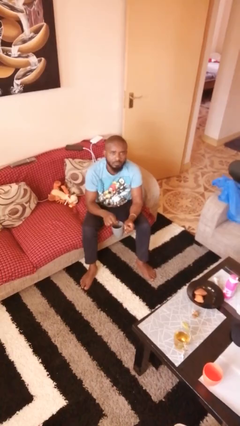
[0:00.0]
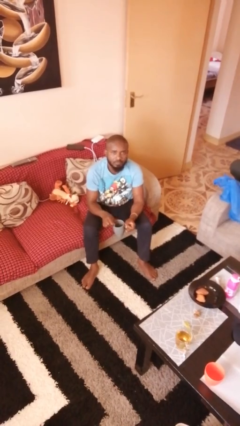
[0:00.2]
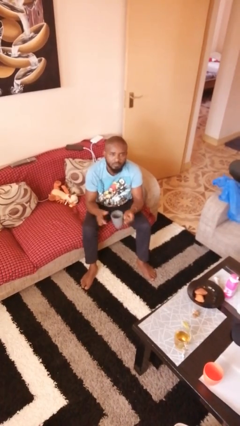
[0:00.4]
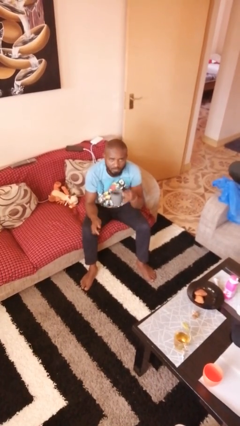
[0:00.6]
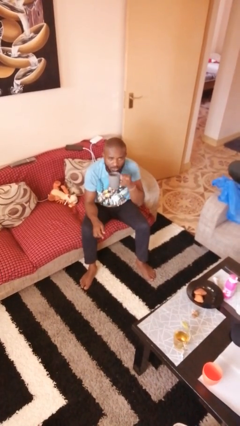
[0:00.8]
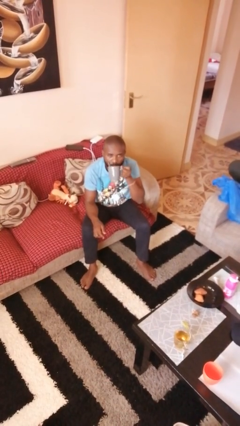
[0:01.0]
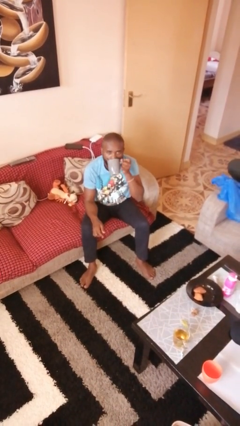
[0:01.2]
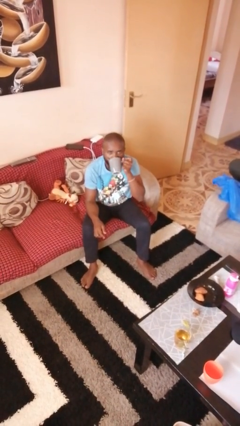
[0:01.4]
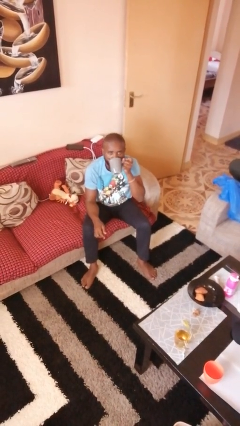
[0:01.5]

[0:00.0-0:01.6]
person drinks from mug

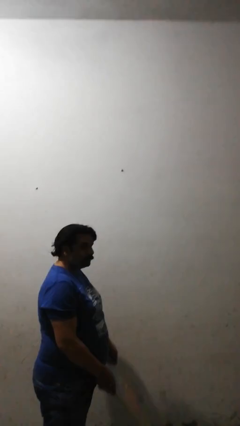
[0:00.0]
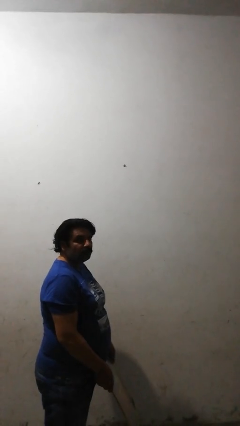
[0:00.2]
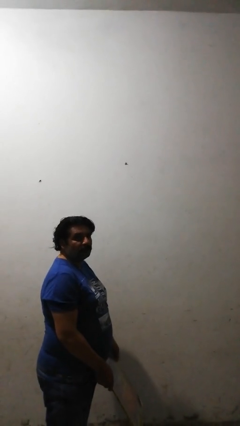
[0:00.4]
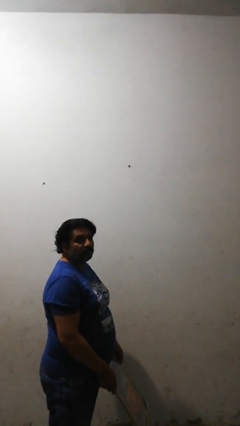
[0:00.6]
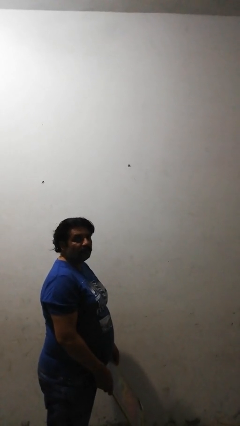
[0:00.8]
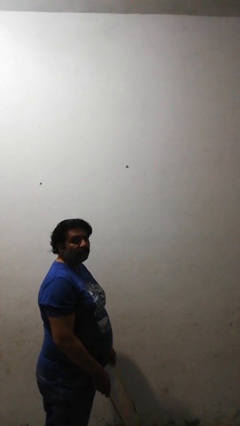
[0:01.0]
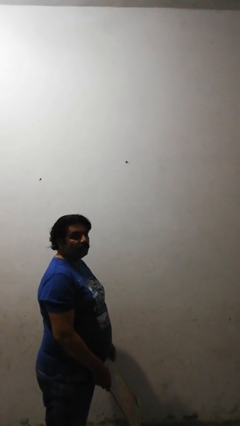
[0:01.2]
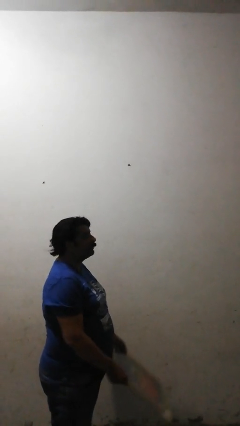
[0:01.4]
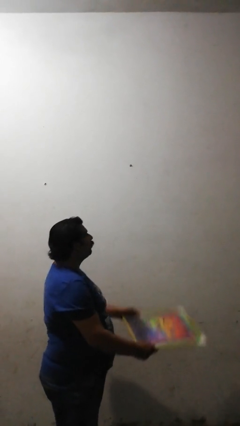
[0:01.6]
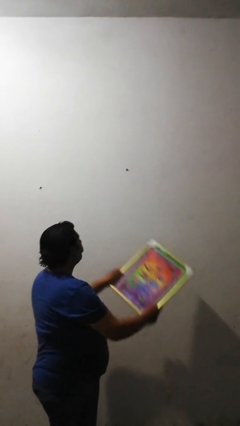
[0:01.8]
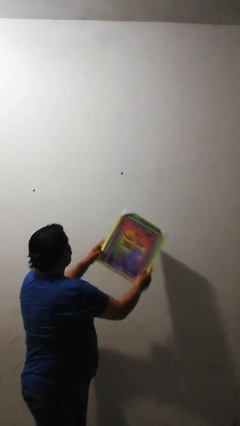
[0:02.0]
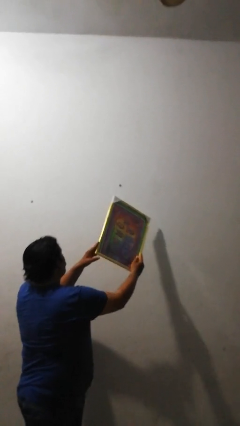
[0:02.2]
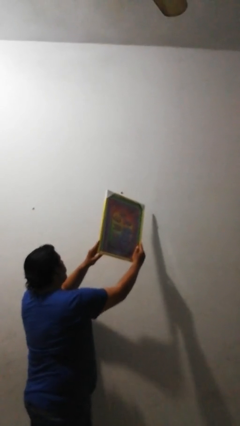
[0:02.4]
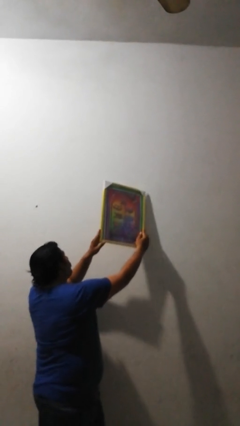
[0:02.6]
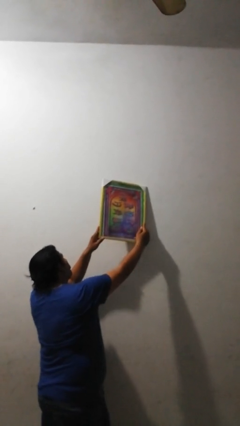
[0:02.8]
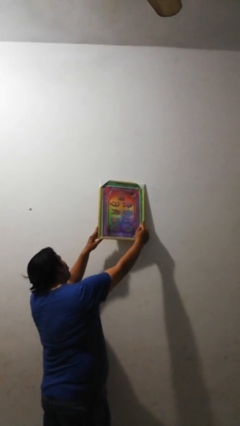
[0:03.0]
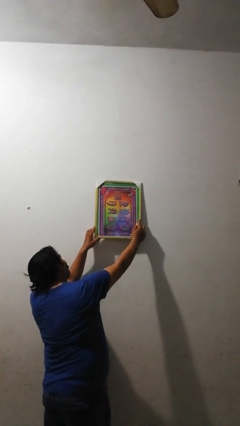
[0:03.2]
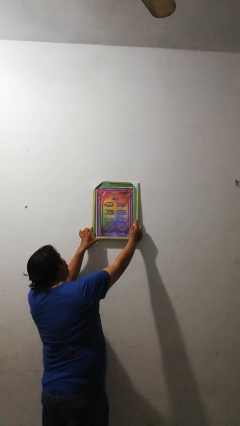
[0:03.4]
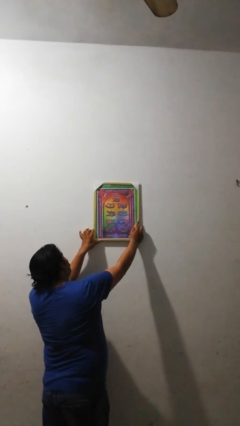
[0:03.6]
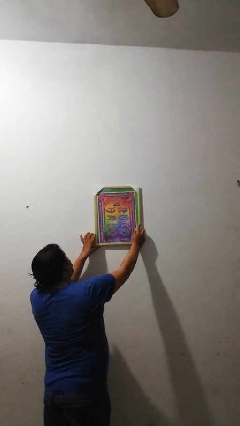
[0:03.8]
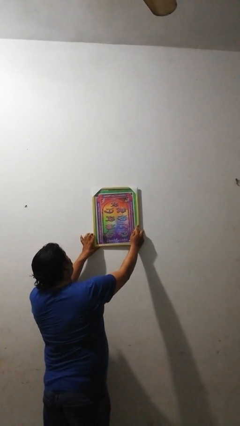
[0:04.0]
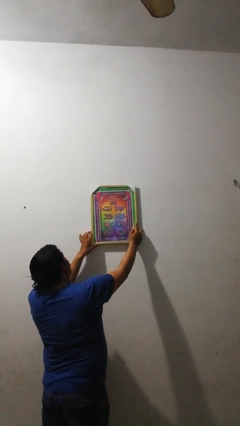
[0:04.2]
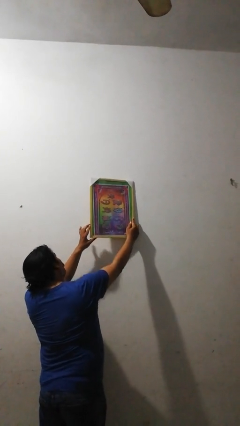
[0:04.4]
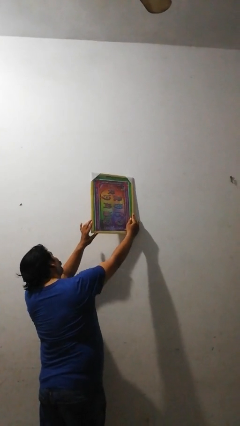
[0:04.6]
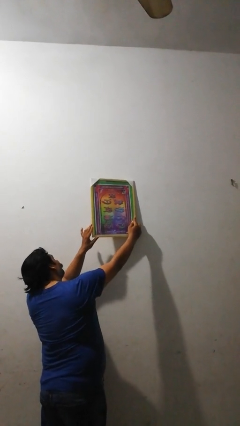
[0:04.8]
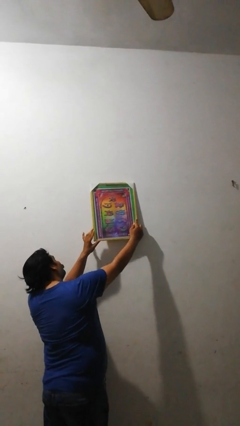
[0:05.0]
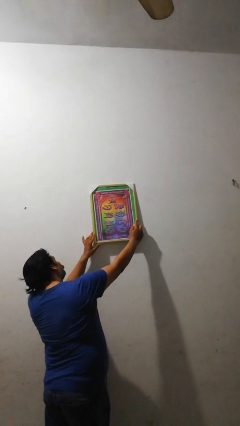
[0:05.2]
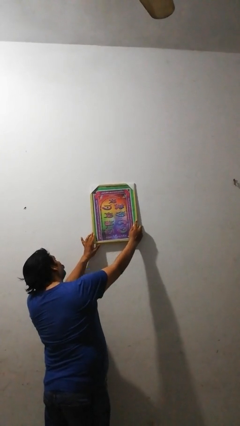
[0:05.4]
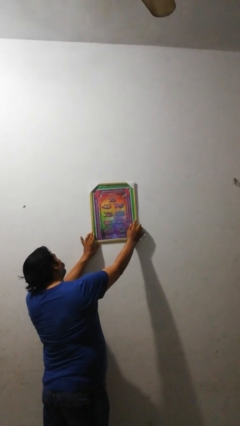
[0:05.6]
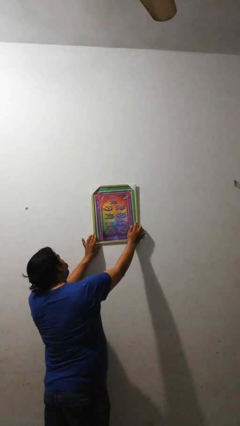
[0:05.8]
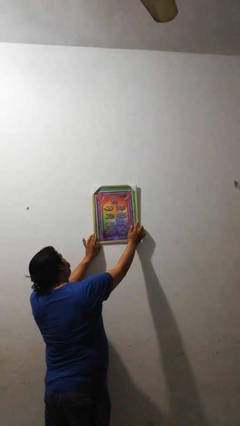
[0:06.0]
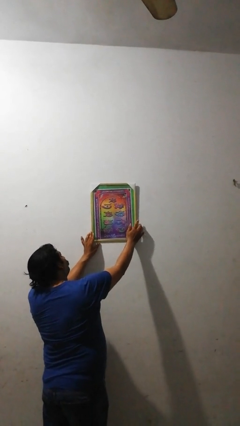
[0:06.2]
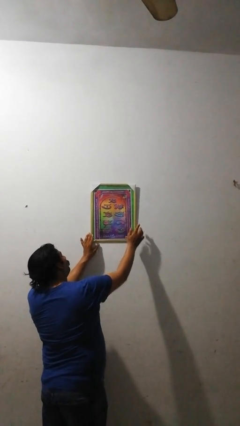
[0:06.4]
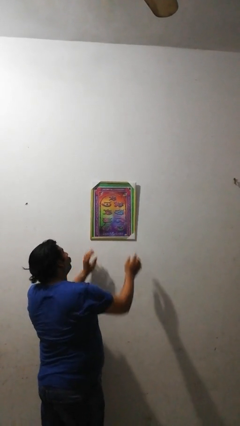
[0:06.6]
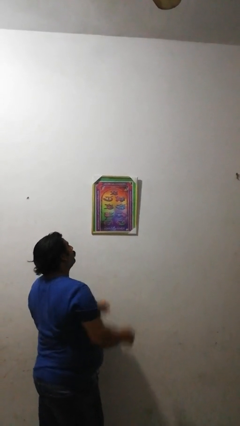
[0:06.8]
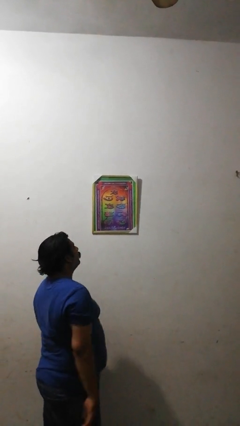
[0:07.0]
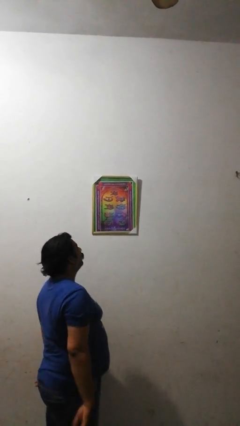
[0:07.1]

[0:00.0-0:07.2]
person puts up picture frame

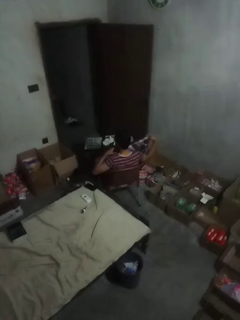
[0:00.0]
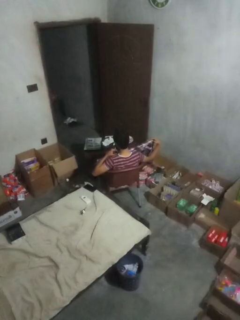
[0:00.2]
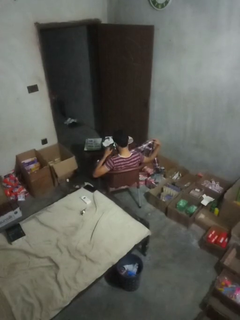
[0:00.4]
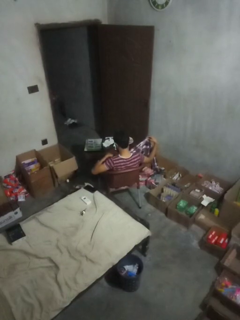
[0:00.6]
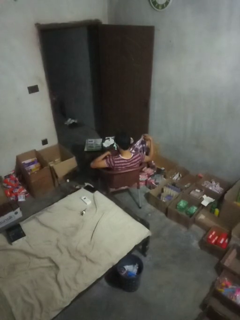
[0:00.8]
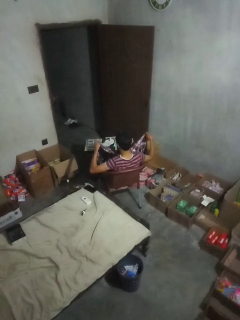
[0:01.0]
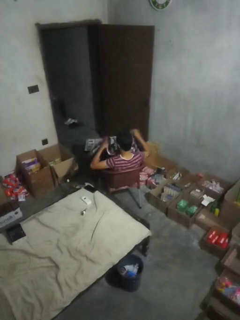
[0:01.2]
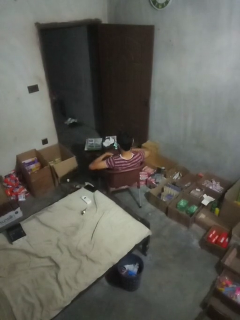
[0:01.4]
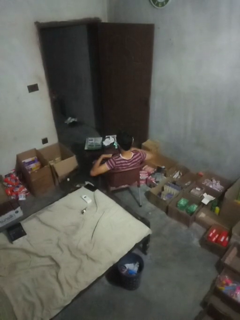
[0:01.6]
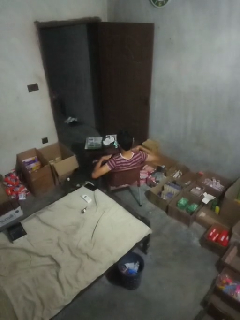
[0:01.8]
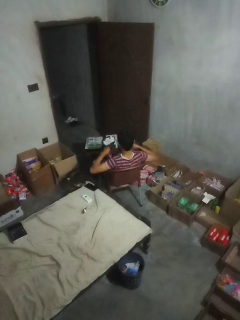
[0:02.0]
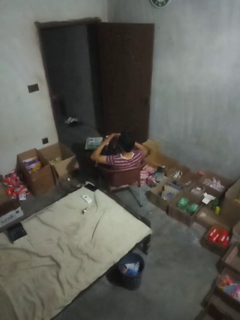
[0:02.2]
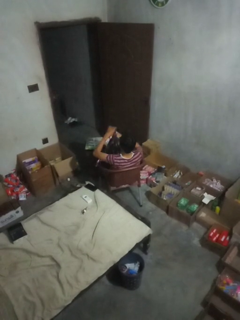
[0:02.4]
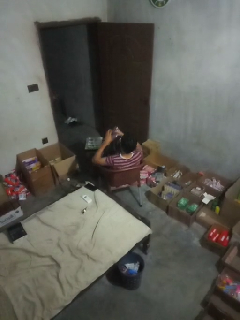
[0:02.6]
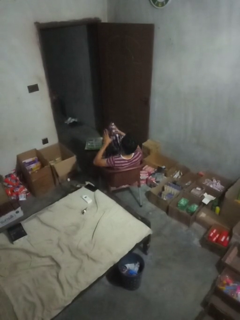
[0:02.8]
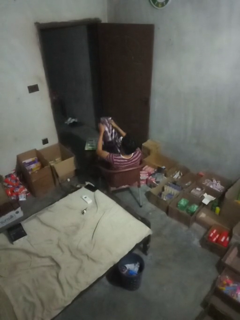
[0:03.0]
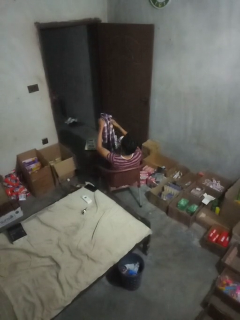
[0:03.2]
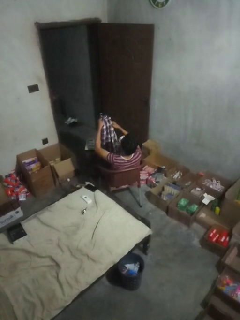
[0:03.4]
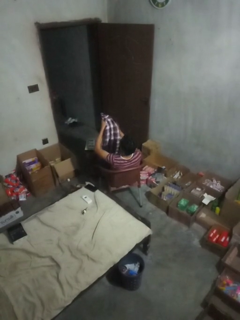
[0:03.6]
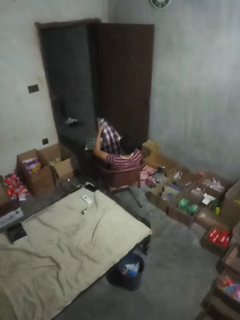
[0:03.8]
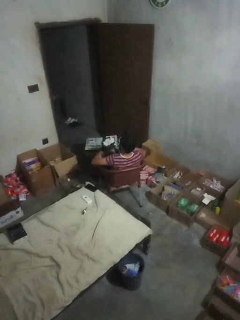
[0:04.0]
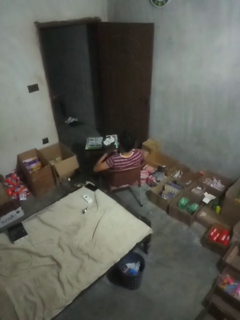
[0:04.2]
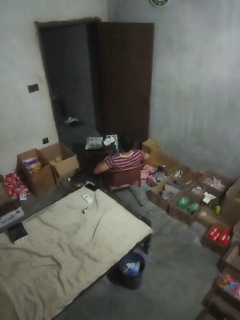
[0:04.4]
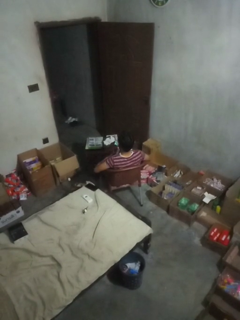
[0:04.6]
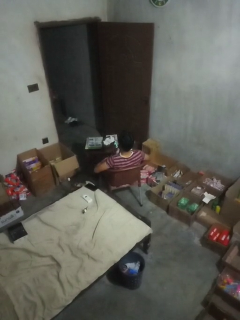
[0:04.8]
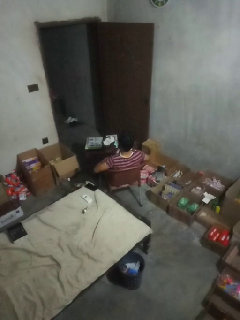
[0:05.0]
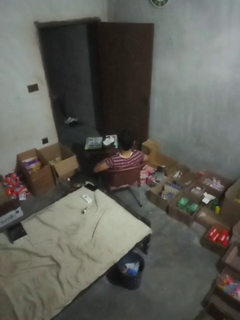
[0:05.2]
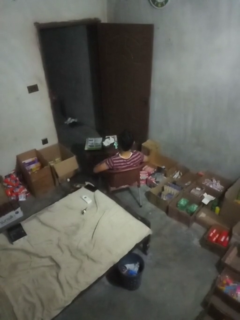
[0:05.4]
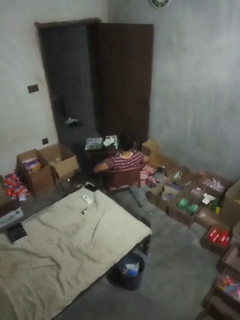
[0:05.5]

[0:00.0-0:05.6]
person folds shirt

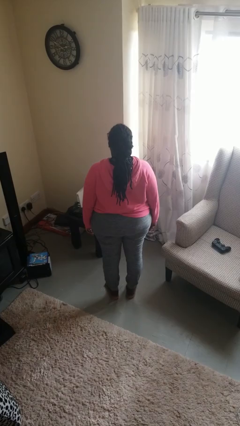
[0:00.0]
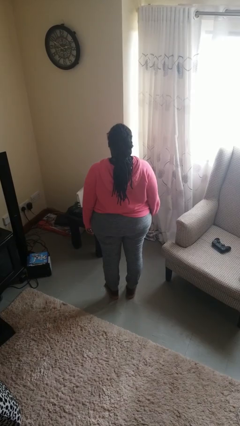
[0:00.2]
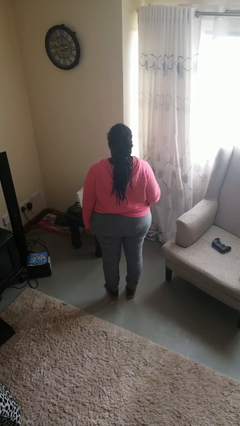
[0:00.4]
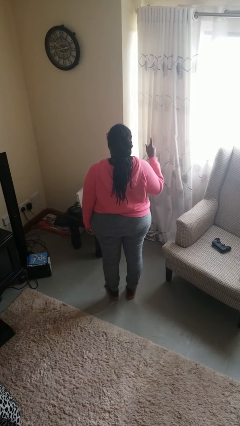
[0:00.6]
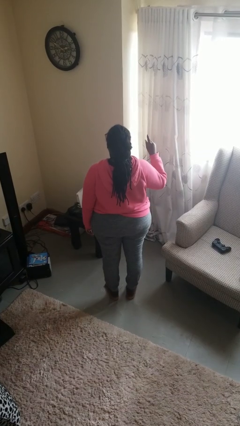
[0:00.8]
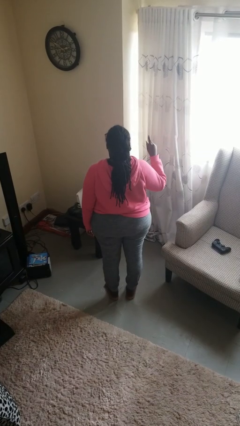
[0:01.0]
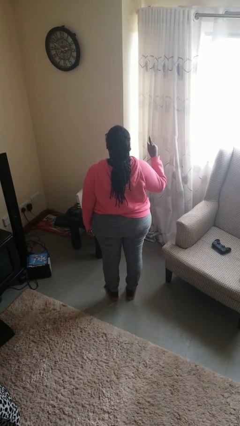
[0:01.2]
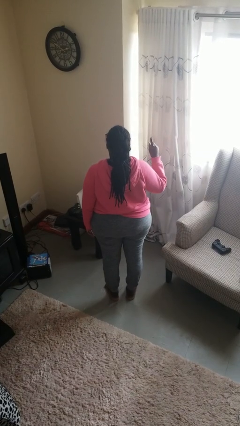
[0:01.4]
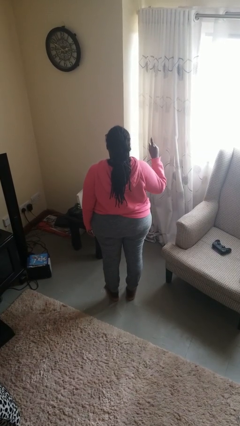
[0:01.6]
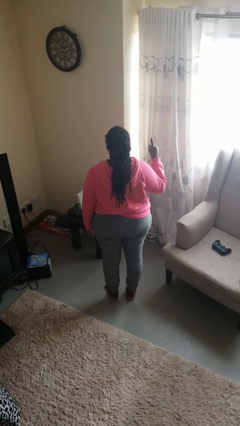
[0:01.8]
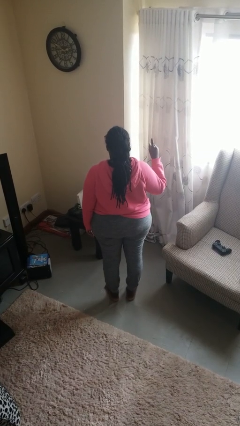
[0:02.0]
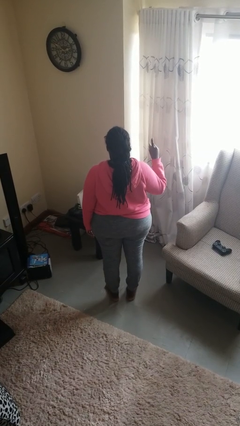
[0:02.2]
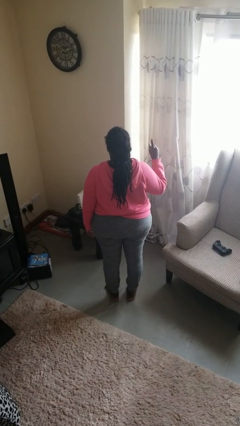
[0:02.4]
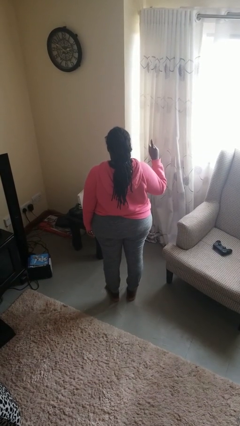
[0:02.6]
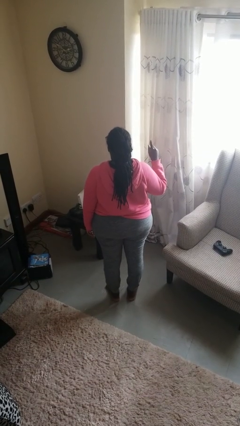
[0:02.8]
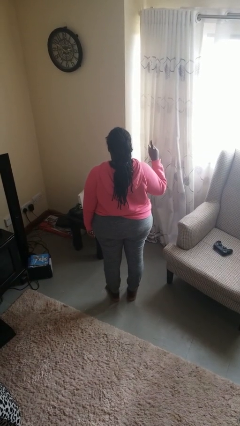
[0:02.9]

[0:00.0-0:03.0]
person gestures number one

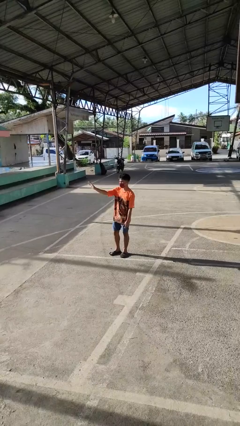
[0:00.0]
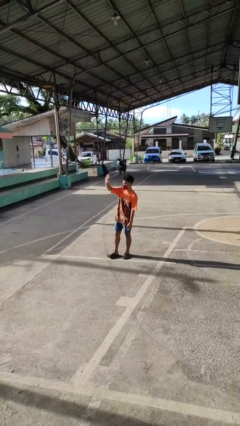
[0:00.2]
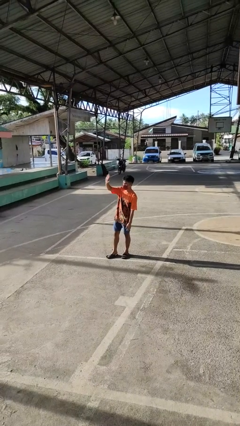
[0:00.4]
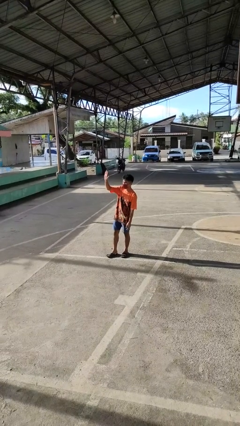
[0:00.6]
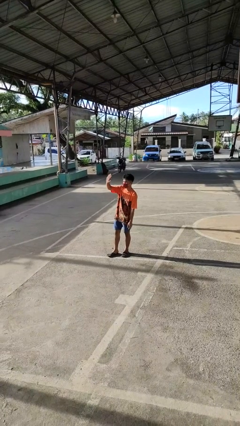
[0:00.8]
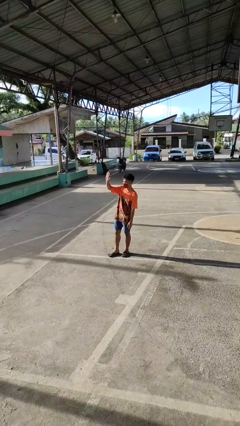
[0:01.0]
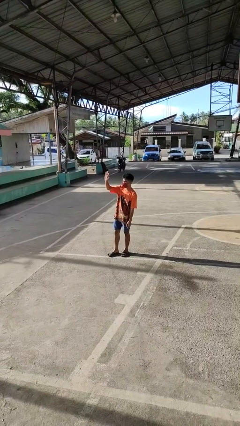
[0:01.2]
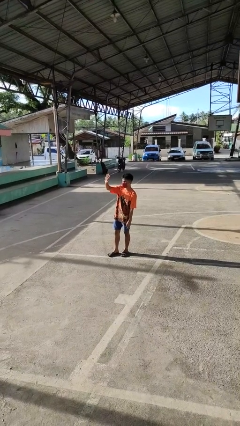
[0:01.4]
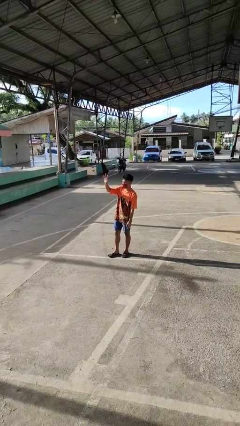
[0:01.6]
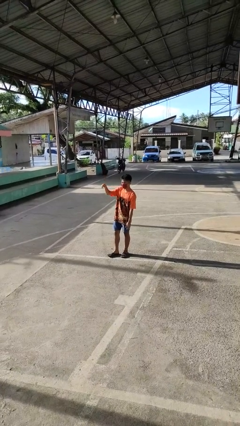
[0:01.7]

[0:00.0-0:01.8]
person waves at person
